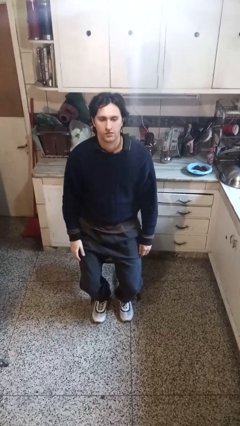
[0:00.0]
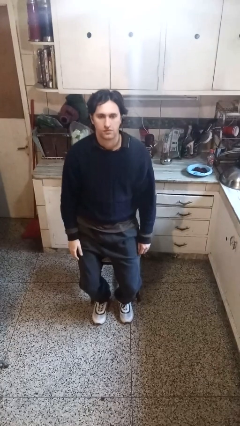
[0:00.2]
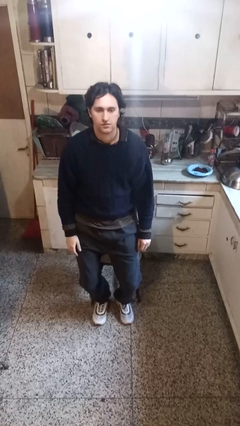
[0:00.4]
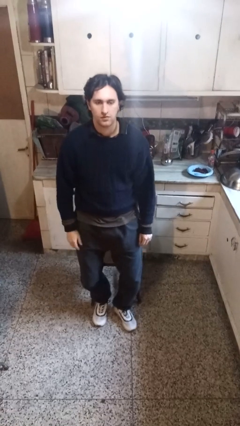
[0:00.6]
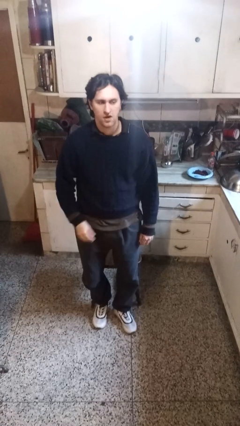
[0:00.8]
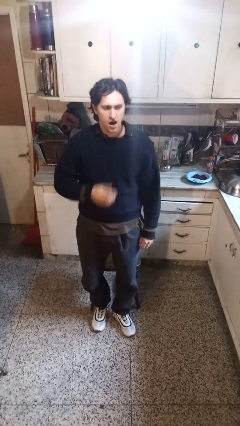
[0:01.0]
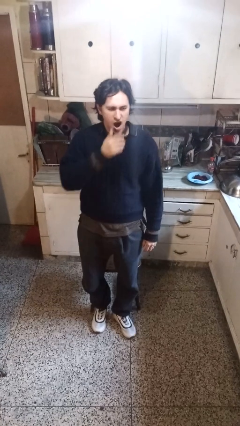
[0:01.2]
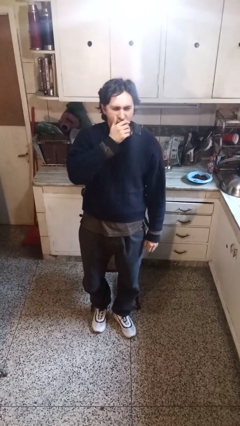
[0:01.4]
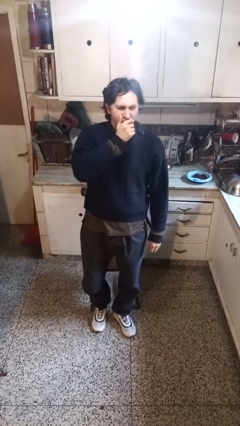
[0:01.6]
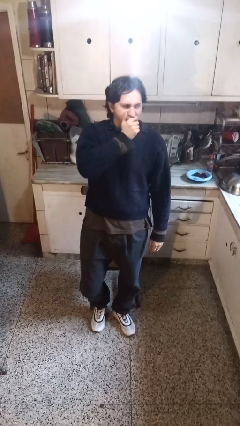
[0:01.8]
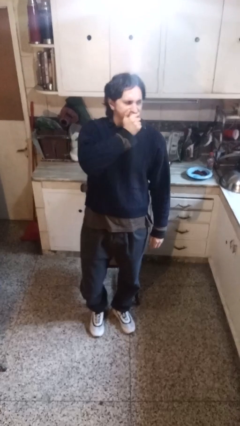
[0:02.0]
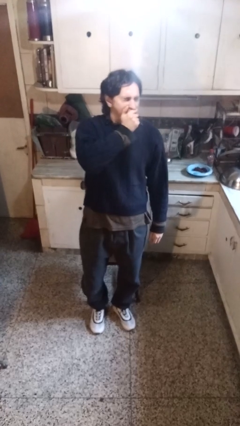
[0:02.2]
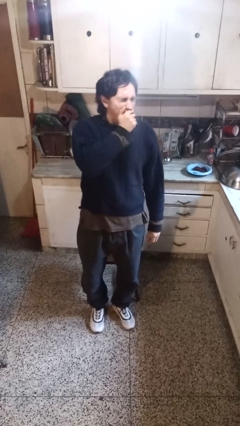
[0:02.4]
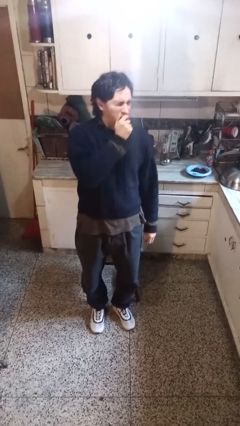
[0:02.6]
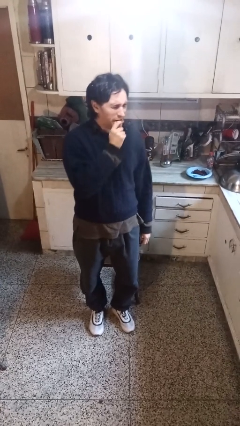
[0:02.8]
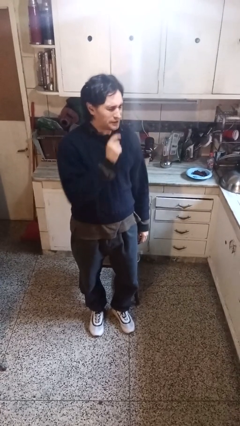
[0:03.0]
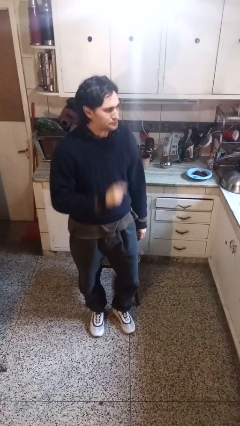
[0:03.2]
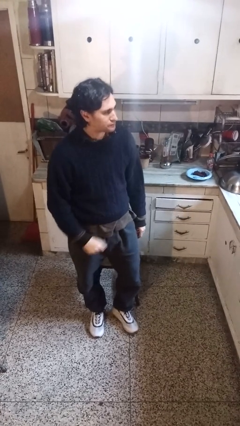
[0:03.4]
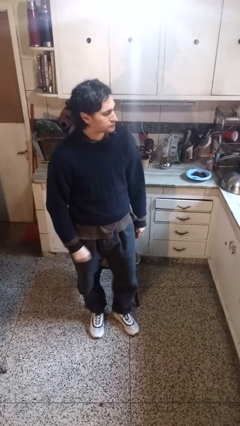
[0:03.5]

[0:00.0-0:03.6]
person yawns

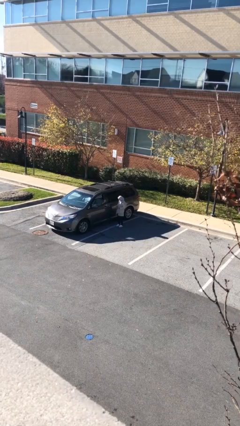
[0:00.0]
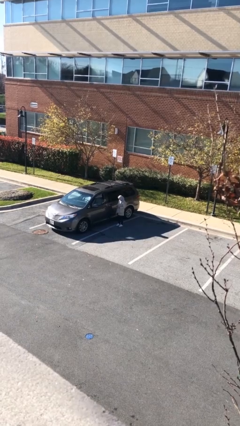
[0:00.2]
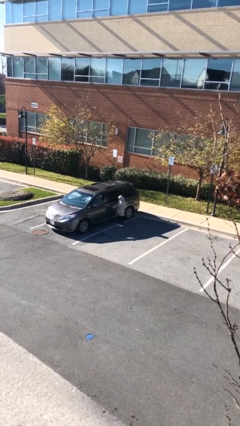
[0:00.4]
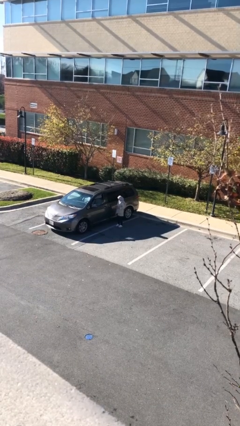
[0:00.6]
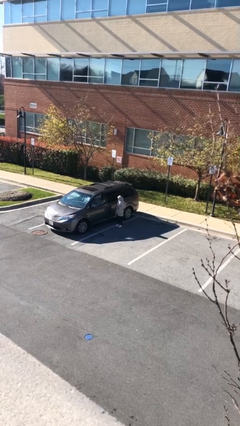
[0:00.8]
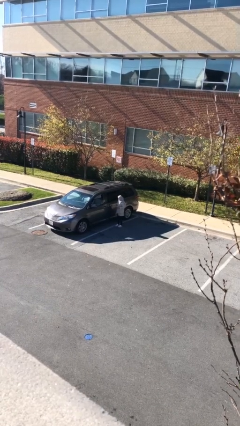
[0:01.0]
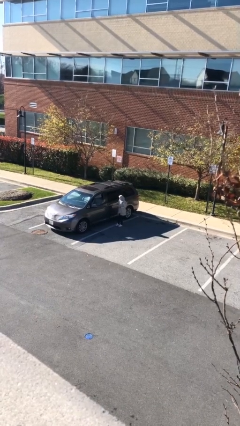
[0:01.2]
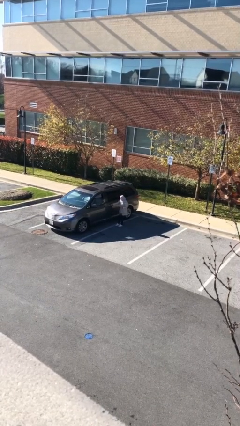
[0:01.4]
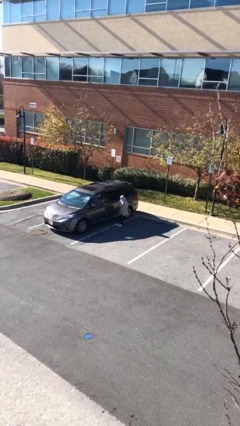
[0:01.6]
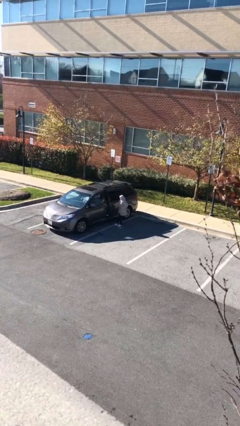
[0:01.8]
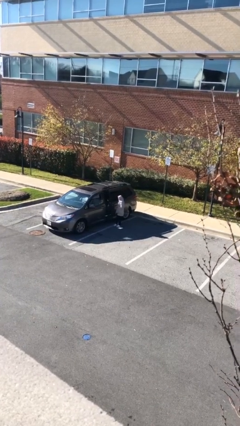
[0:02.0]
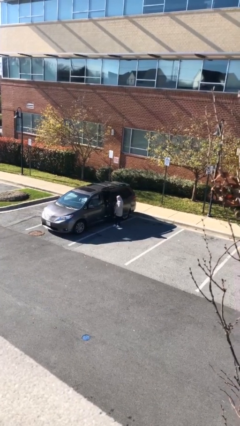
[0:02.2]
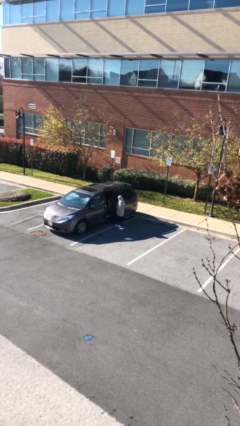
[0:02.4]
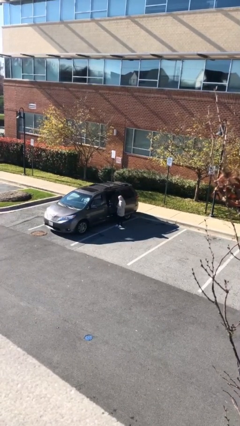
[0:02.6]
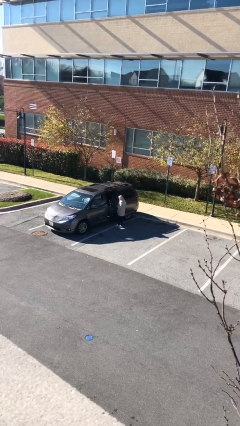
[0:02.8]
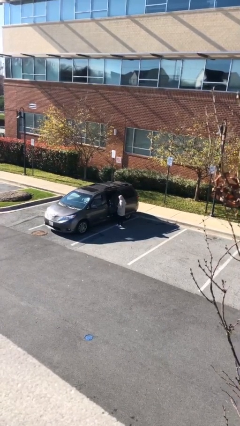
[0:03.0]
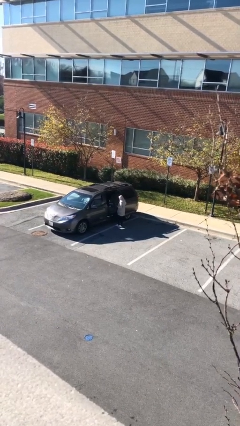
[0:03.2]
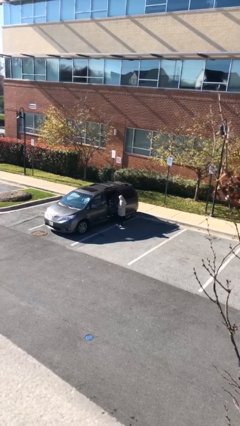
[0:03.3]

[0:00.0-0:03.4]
person opens car door

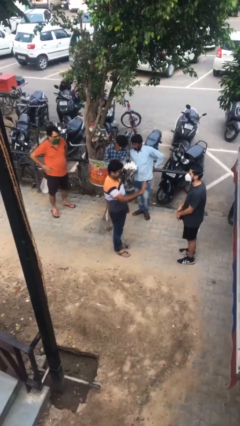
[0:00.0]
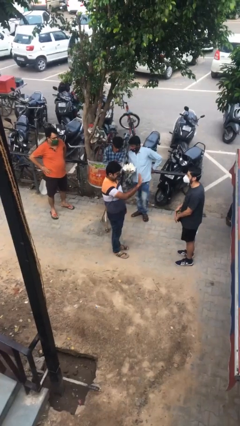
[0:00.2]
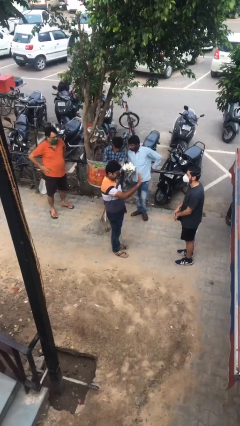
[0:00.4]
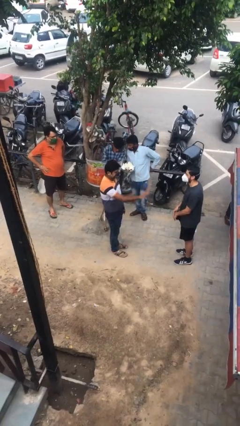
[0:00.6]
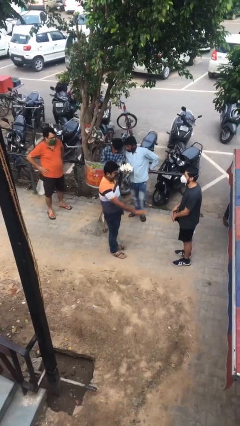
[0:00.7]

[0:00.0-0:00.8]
person waves at person

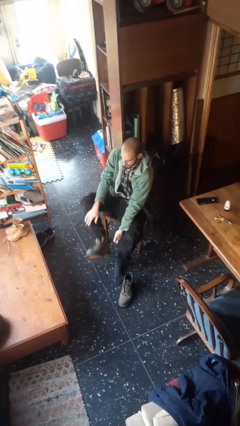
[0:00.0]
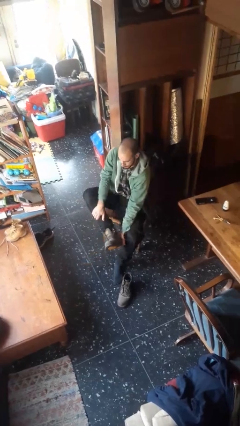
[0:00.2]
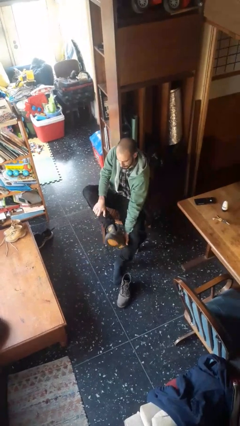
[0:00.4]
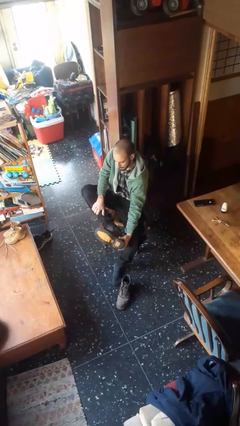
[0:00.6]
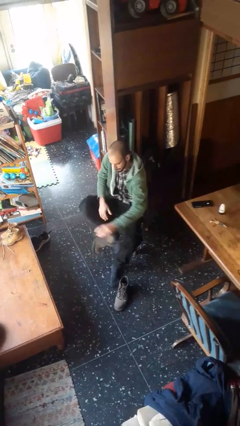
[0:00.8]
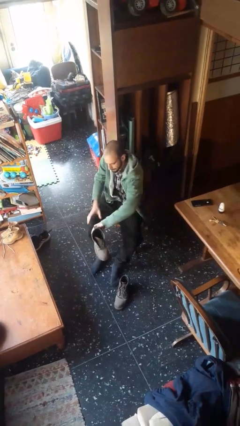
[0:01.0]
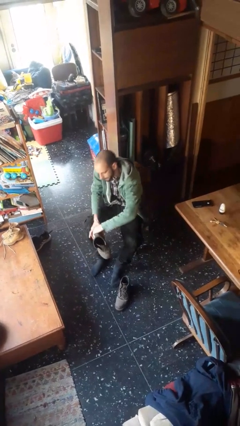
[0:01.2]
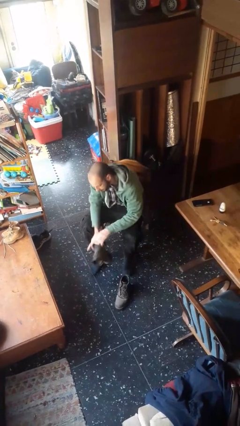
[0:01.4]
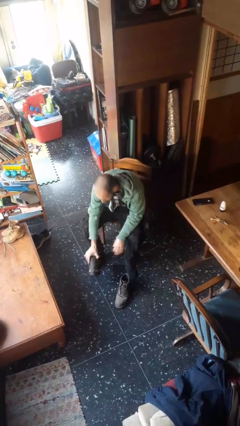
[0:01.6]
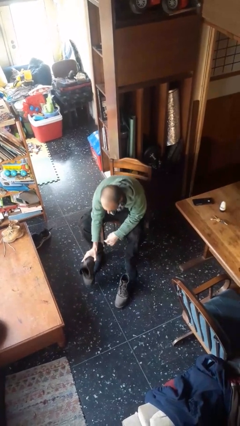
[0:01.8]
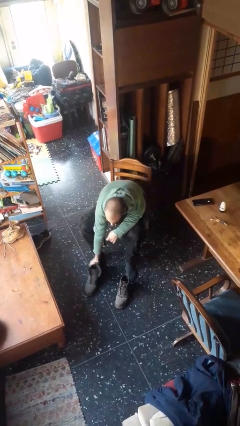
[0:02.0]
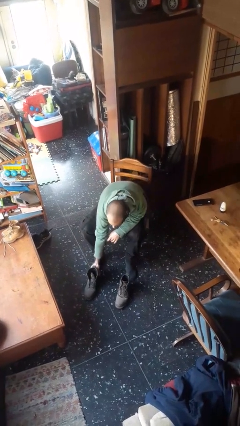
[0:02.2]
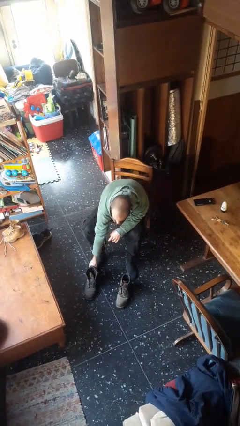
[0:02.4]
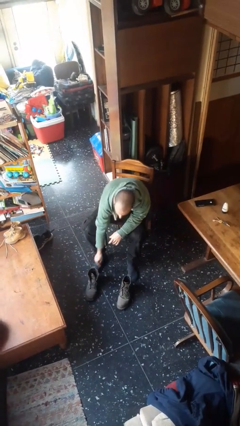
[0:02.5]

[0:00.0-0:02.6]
person takes off boots

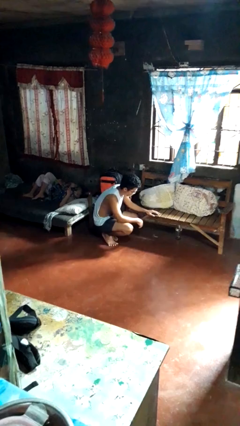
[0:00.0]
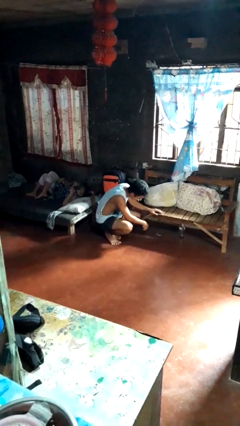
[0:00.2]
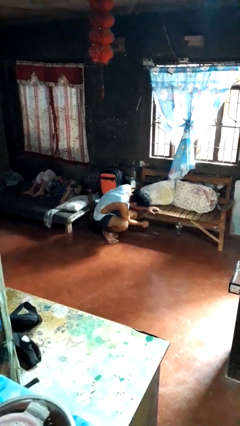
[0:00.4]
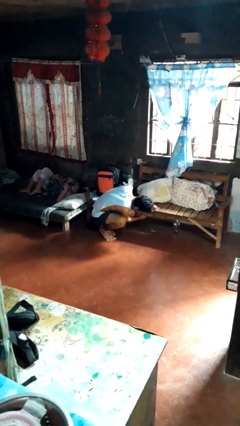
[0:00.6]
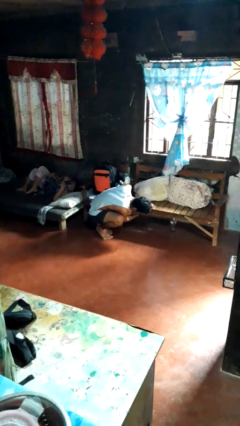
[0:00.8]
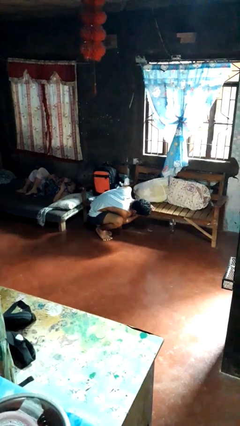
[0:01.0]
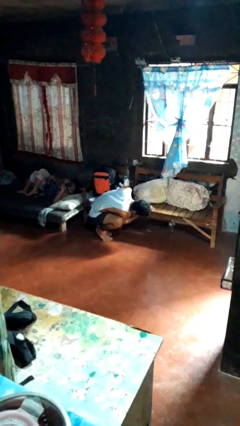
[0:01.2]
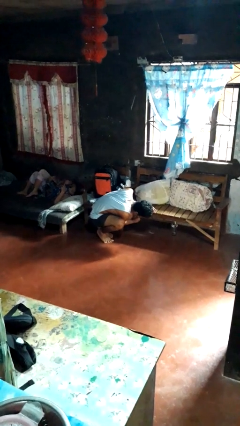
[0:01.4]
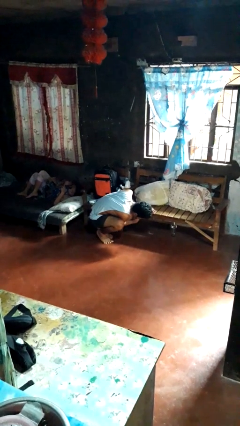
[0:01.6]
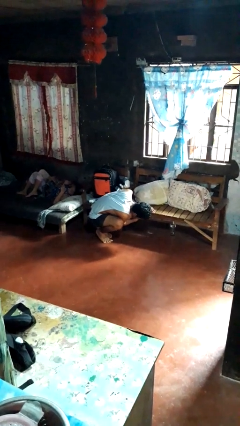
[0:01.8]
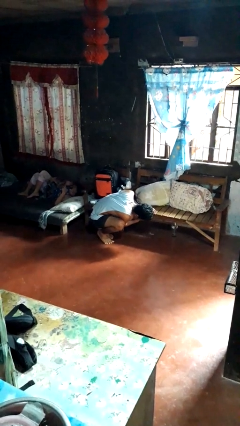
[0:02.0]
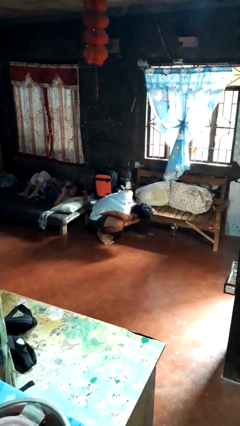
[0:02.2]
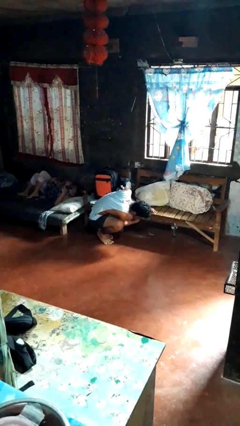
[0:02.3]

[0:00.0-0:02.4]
person searches under couch

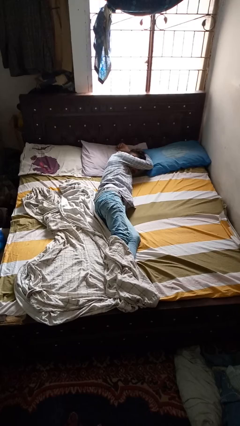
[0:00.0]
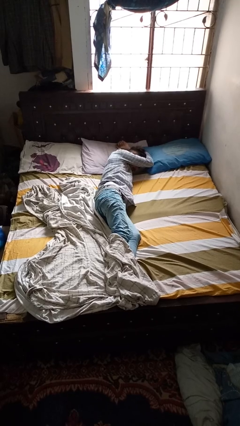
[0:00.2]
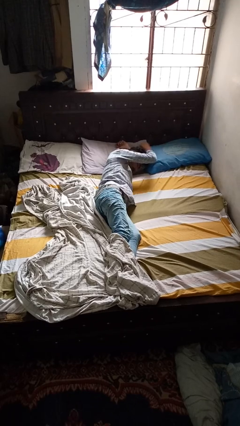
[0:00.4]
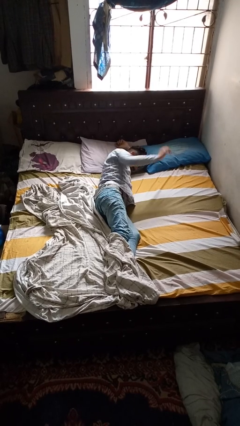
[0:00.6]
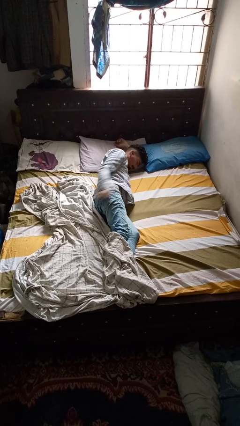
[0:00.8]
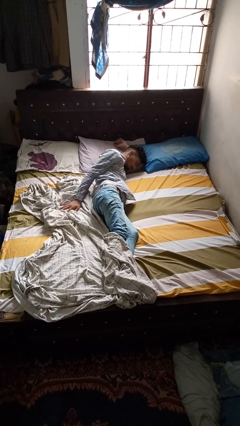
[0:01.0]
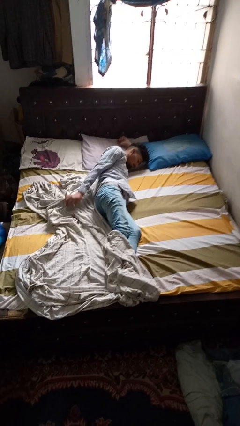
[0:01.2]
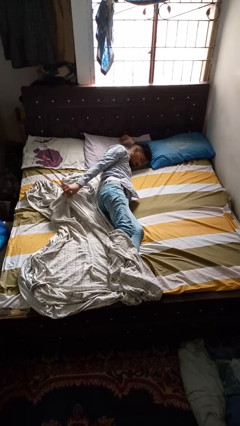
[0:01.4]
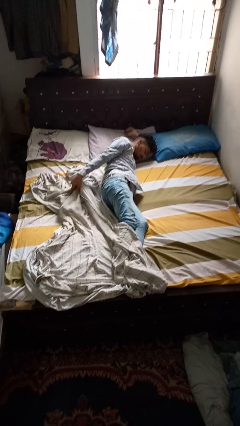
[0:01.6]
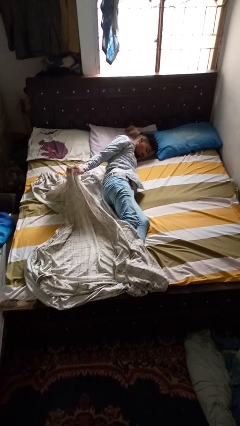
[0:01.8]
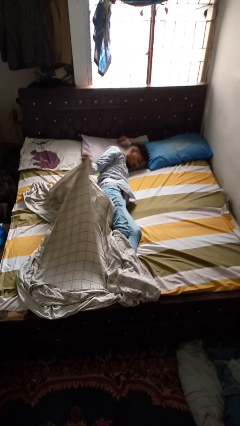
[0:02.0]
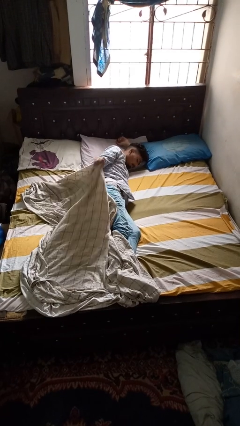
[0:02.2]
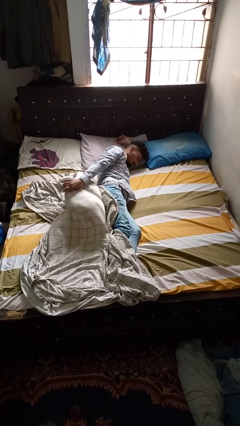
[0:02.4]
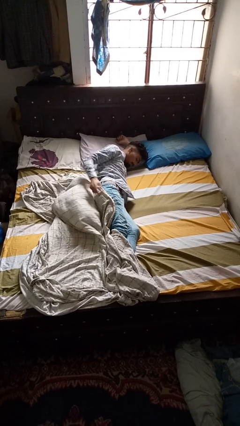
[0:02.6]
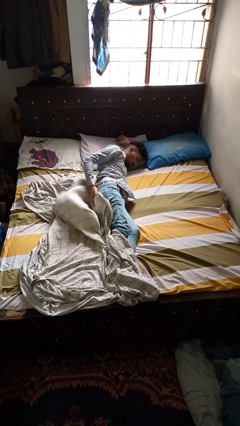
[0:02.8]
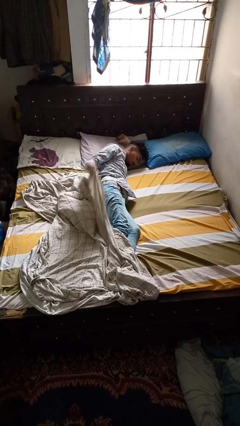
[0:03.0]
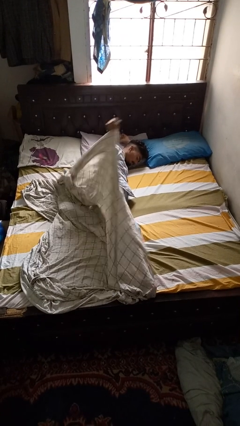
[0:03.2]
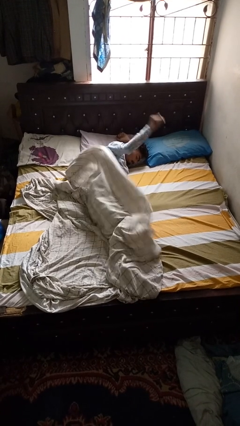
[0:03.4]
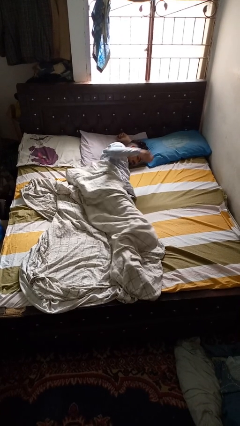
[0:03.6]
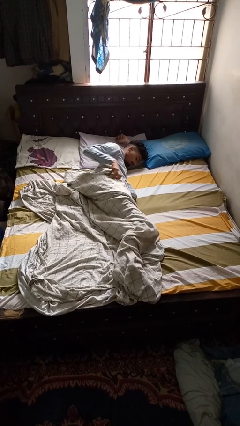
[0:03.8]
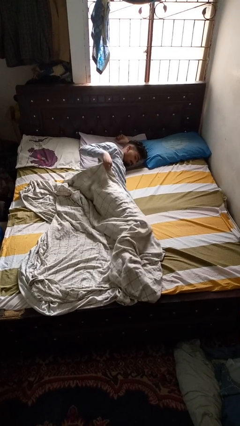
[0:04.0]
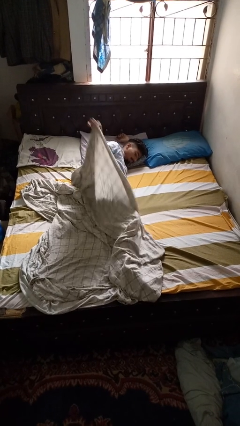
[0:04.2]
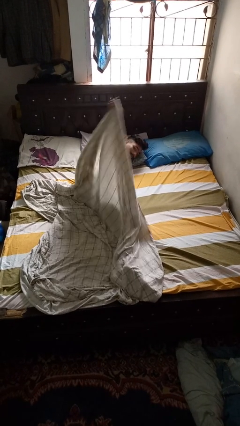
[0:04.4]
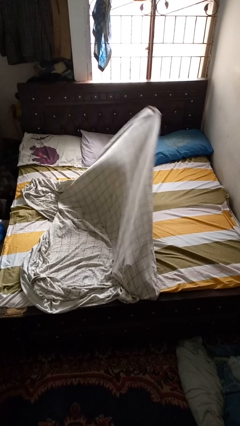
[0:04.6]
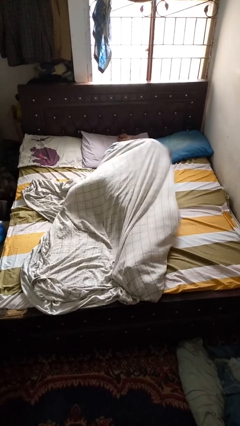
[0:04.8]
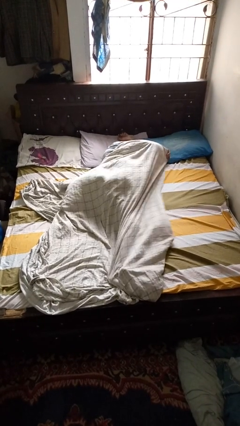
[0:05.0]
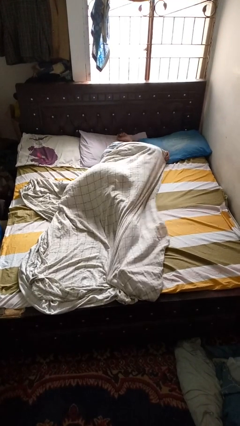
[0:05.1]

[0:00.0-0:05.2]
person covers with bedsheets
